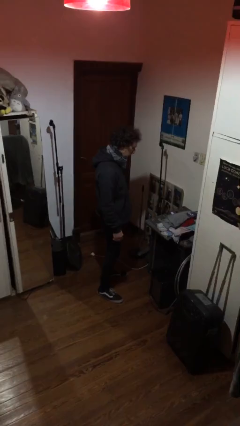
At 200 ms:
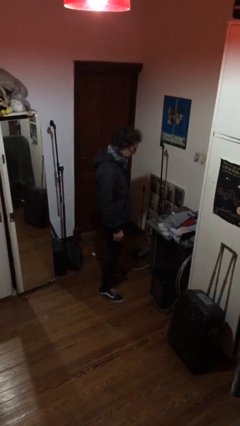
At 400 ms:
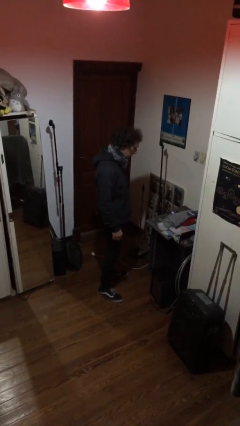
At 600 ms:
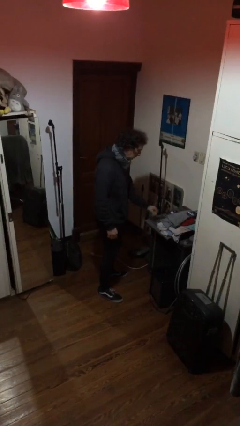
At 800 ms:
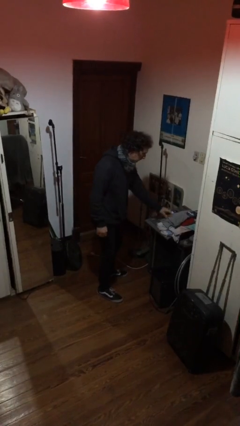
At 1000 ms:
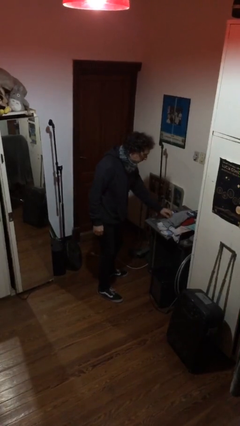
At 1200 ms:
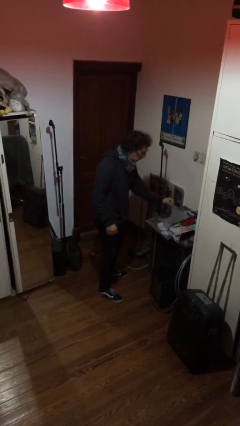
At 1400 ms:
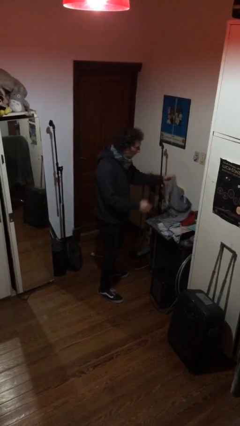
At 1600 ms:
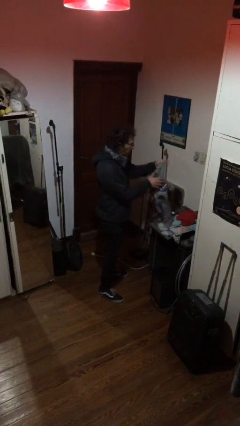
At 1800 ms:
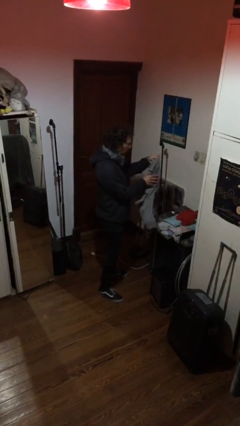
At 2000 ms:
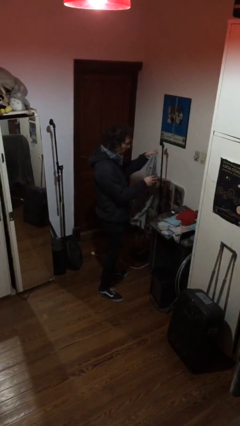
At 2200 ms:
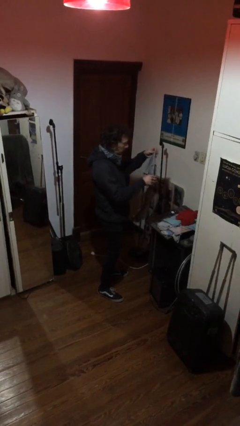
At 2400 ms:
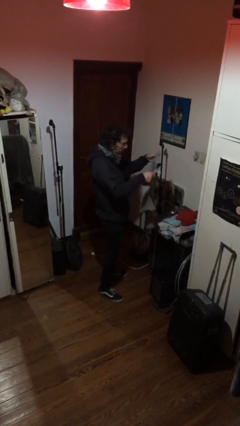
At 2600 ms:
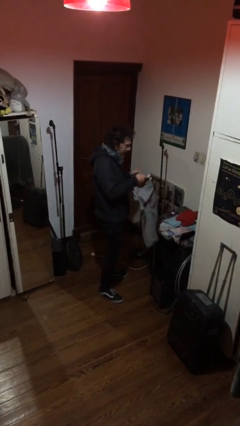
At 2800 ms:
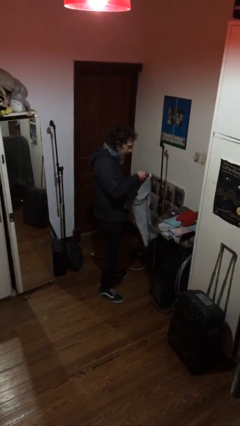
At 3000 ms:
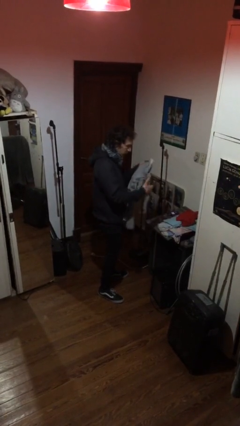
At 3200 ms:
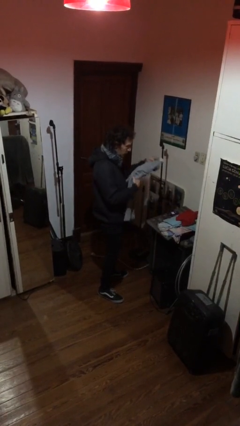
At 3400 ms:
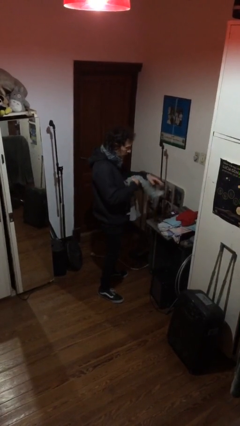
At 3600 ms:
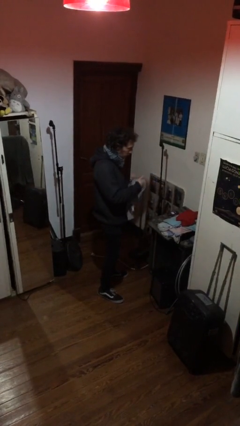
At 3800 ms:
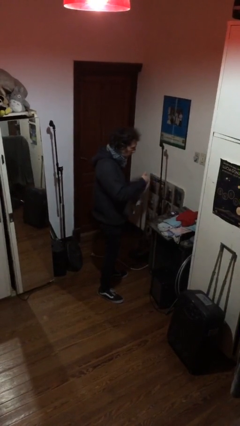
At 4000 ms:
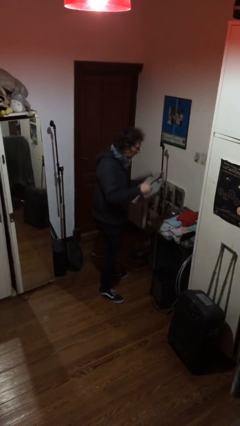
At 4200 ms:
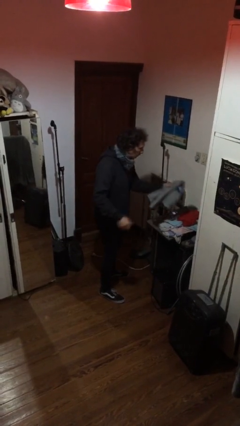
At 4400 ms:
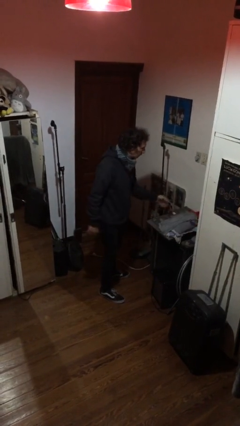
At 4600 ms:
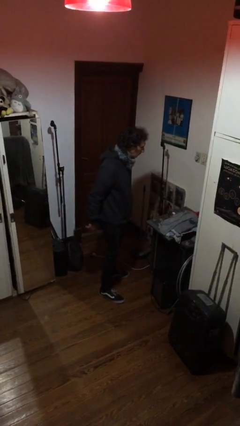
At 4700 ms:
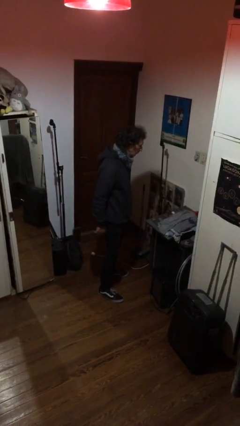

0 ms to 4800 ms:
person folds shirt

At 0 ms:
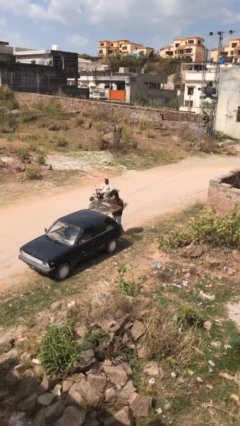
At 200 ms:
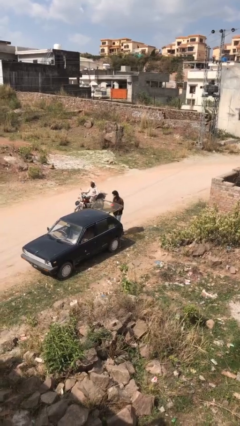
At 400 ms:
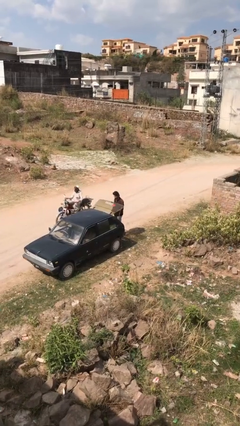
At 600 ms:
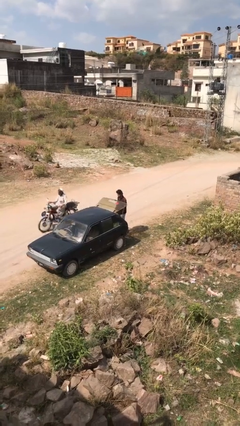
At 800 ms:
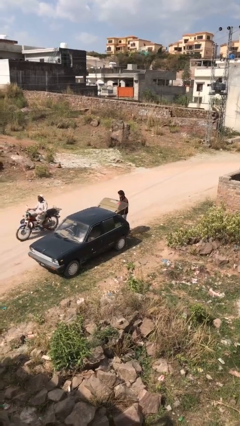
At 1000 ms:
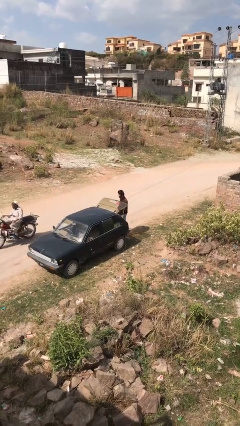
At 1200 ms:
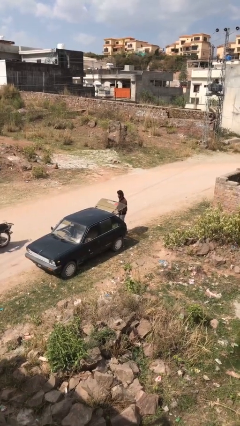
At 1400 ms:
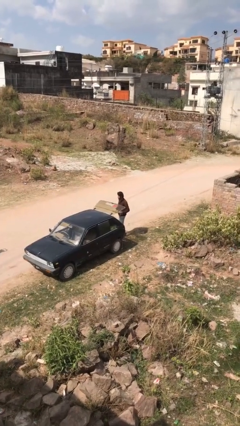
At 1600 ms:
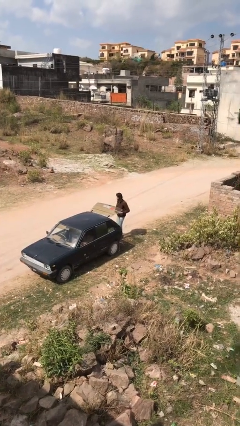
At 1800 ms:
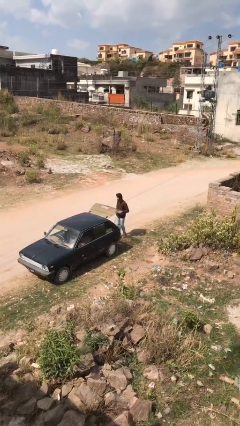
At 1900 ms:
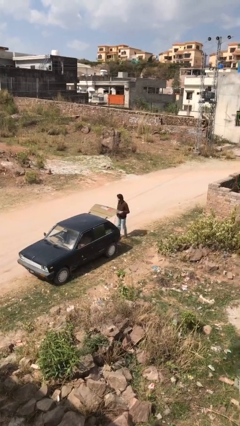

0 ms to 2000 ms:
person unloads car

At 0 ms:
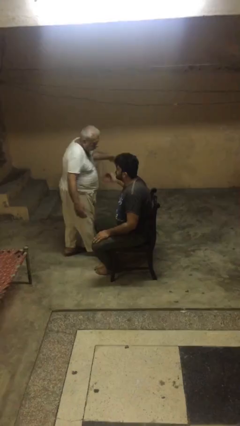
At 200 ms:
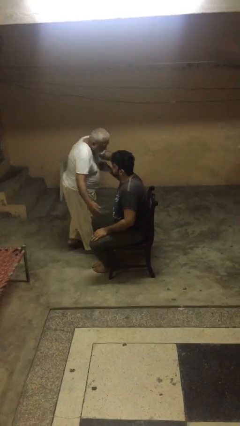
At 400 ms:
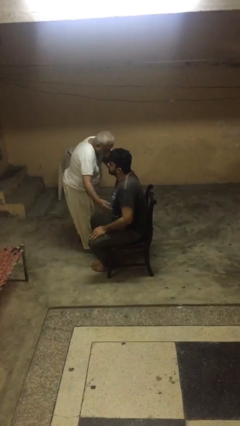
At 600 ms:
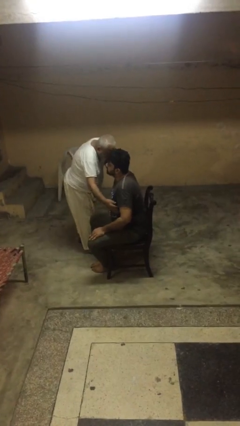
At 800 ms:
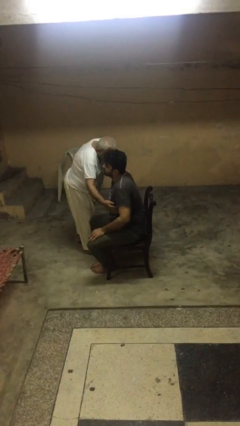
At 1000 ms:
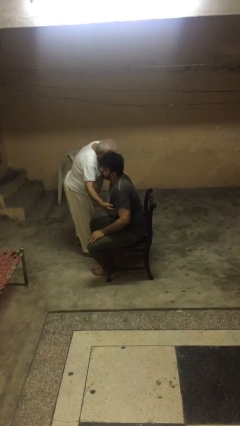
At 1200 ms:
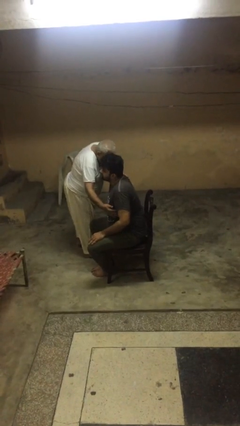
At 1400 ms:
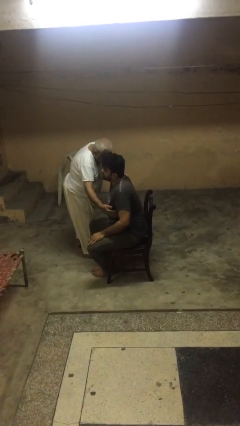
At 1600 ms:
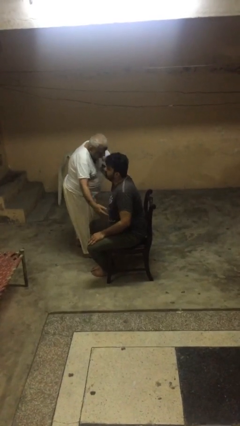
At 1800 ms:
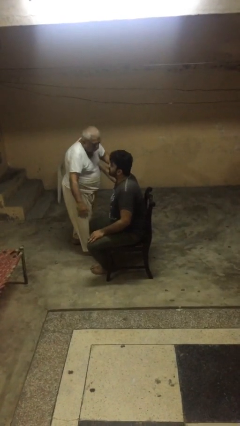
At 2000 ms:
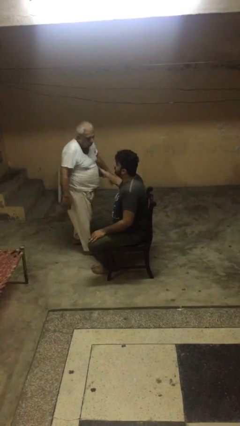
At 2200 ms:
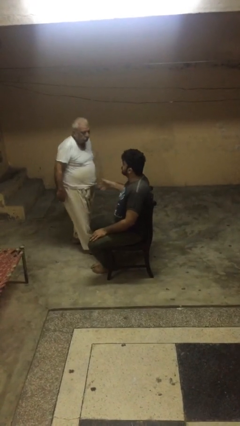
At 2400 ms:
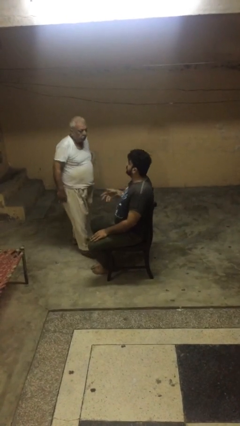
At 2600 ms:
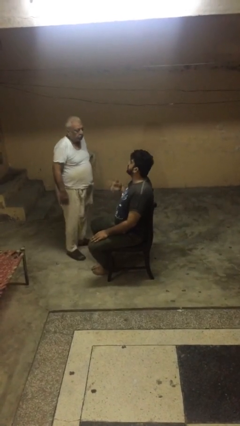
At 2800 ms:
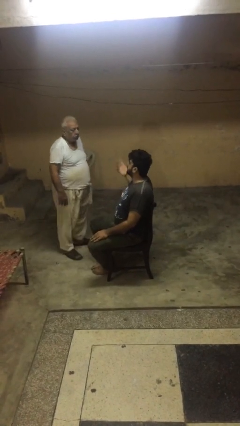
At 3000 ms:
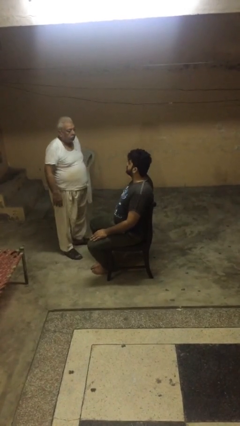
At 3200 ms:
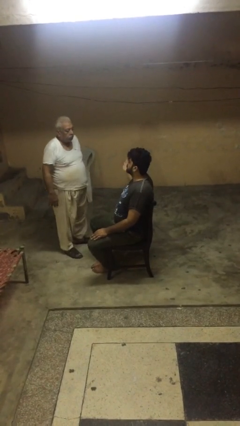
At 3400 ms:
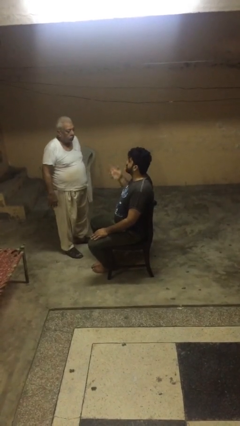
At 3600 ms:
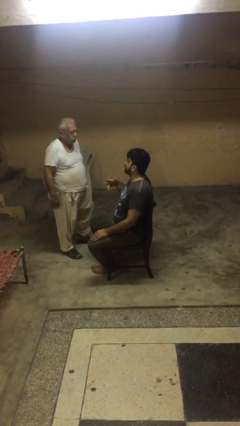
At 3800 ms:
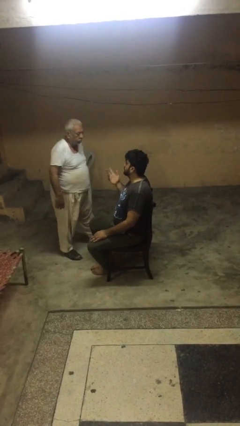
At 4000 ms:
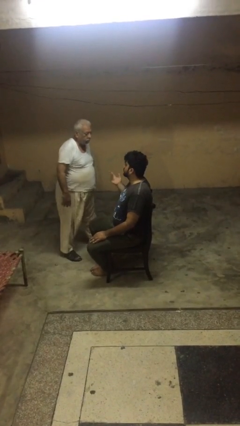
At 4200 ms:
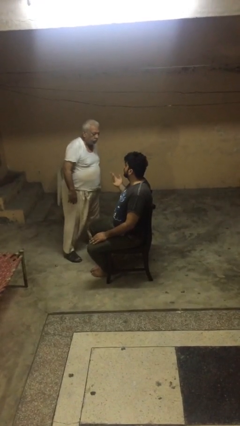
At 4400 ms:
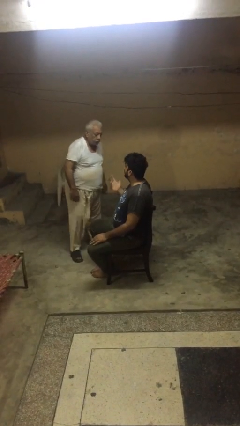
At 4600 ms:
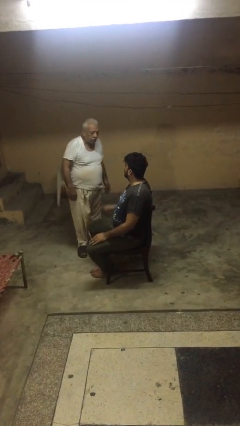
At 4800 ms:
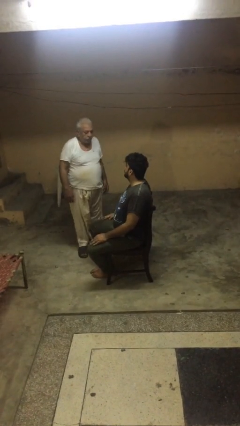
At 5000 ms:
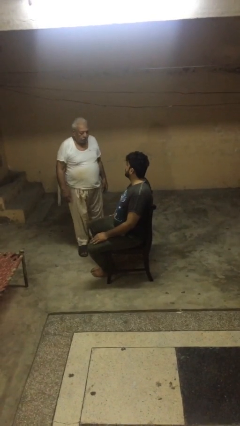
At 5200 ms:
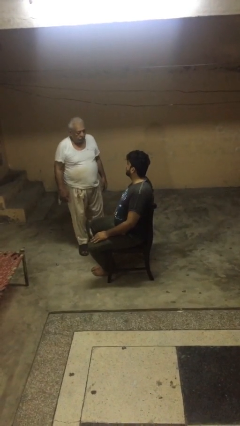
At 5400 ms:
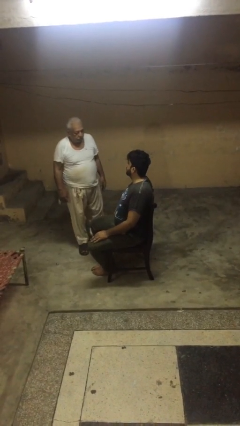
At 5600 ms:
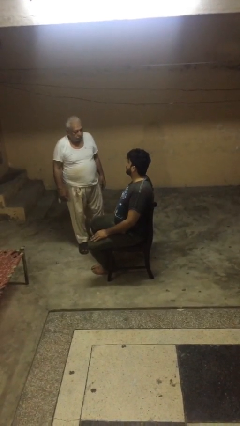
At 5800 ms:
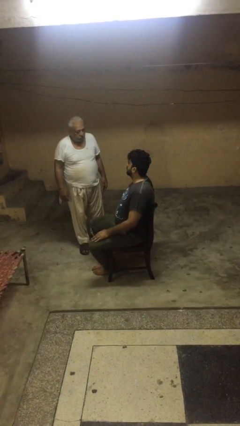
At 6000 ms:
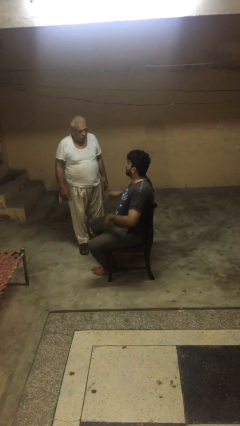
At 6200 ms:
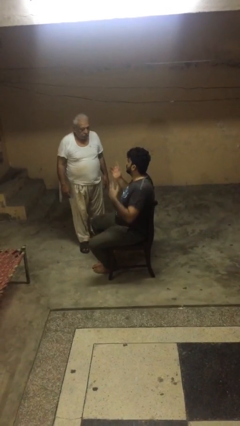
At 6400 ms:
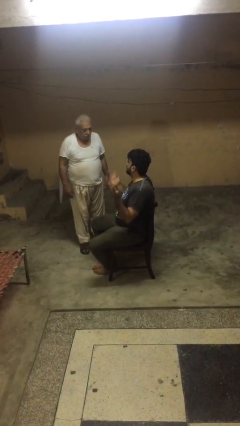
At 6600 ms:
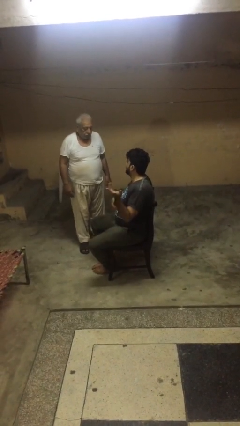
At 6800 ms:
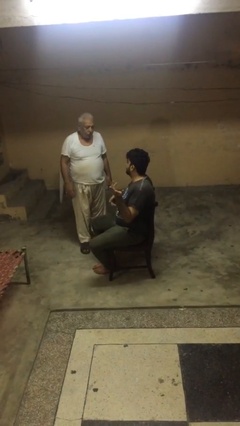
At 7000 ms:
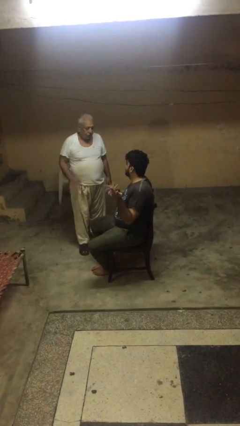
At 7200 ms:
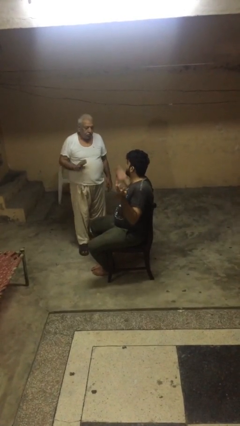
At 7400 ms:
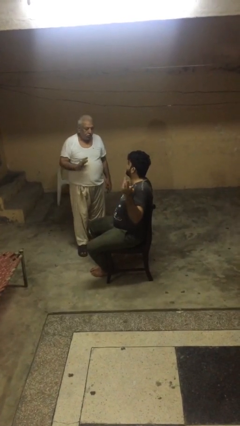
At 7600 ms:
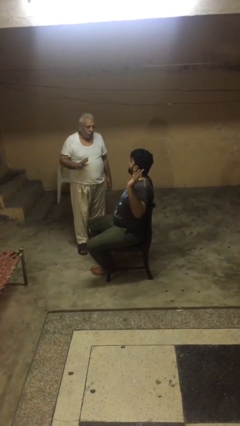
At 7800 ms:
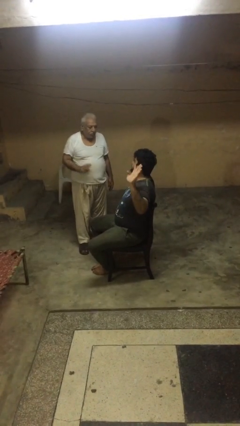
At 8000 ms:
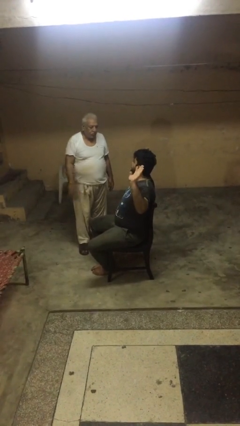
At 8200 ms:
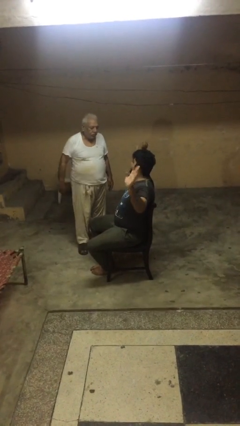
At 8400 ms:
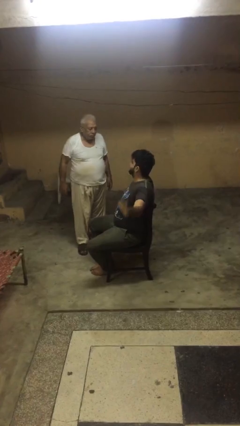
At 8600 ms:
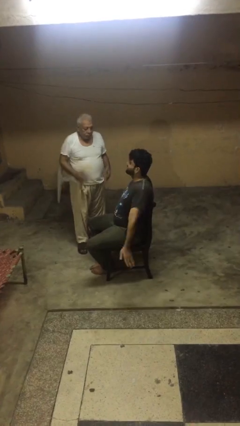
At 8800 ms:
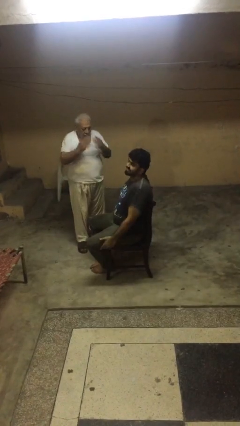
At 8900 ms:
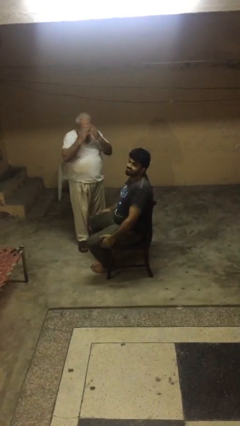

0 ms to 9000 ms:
person embraces person

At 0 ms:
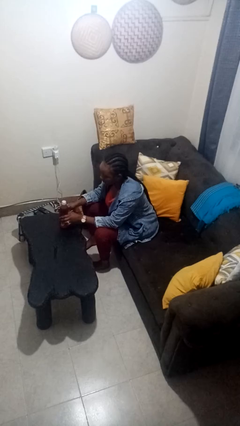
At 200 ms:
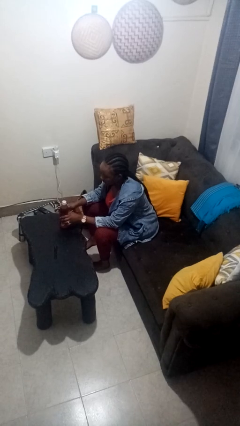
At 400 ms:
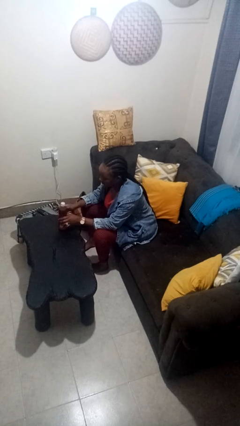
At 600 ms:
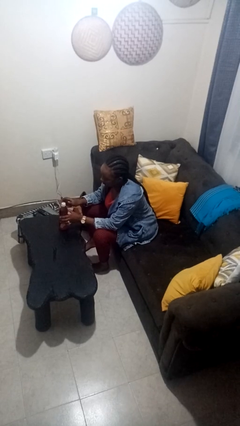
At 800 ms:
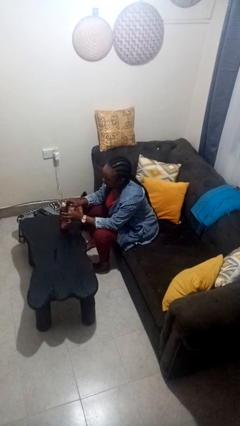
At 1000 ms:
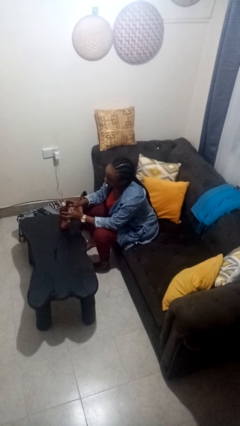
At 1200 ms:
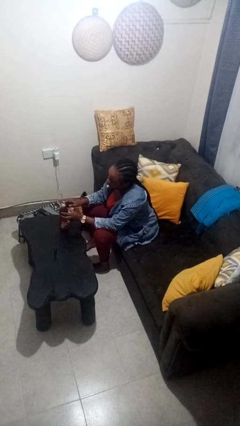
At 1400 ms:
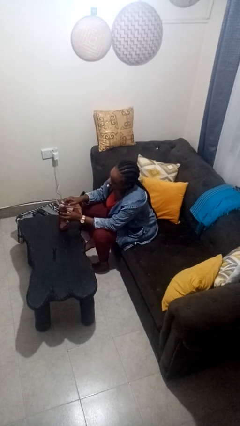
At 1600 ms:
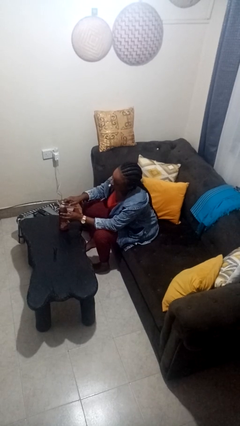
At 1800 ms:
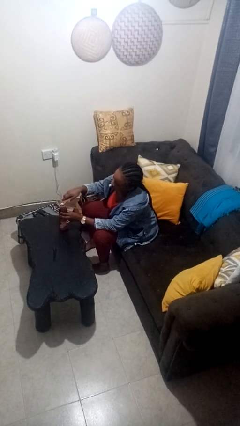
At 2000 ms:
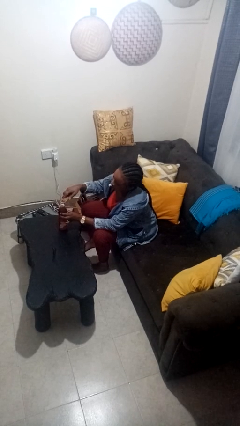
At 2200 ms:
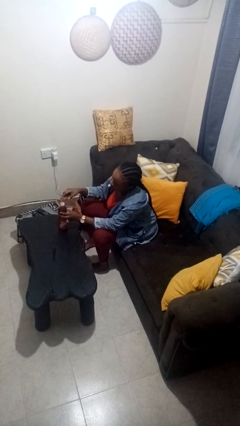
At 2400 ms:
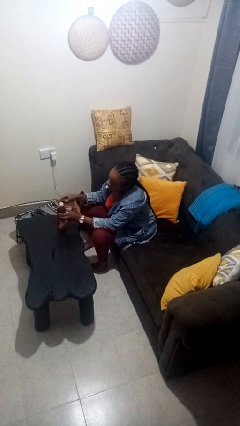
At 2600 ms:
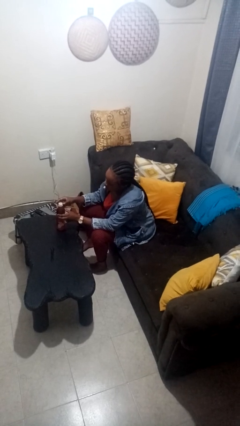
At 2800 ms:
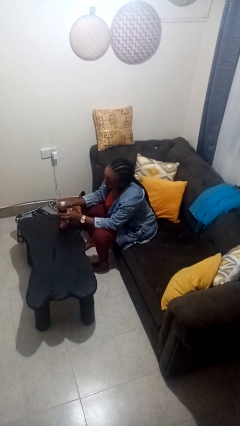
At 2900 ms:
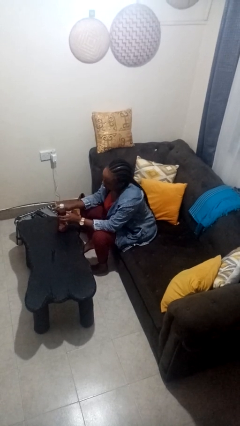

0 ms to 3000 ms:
person opens can with can opener
